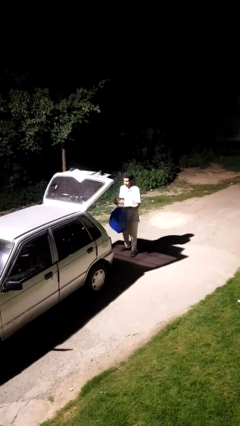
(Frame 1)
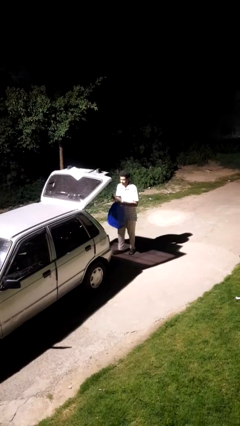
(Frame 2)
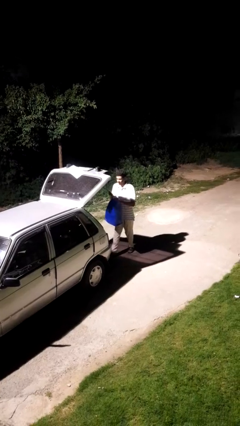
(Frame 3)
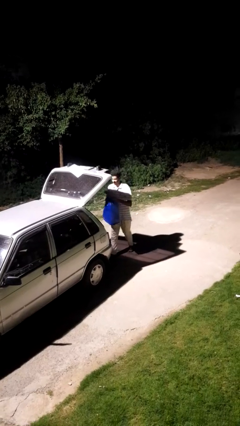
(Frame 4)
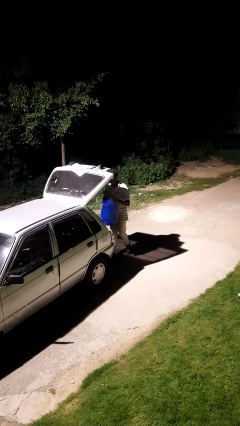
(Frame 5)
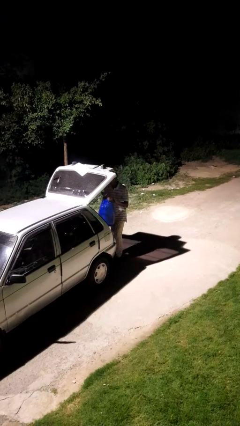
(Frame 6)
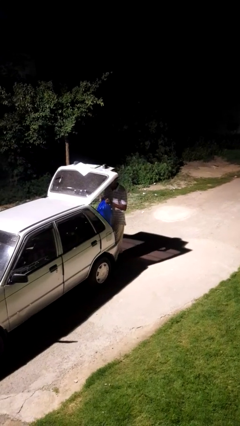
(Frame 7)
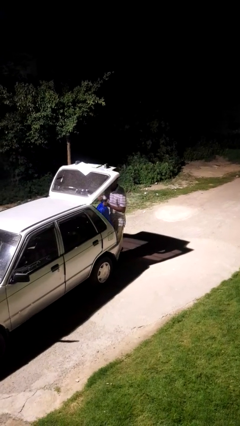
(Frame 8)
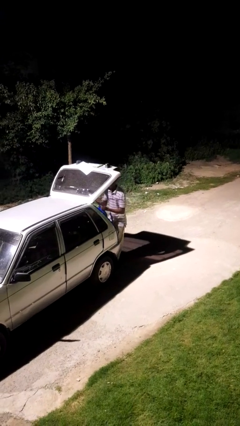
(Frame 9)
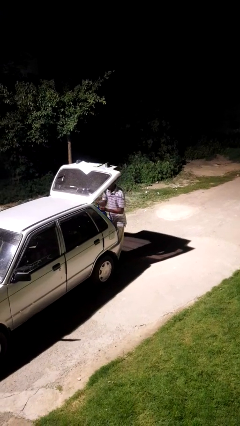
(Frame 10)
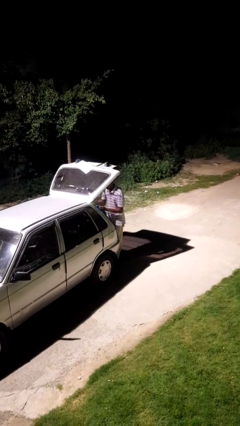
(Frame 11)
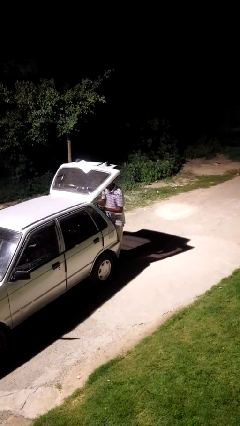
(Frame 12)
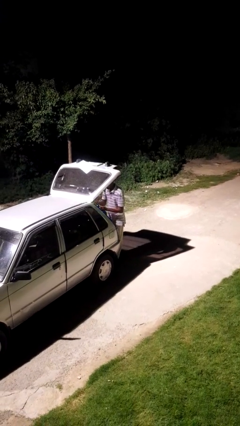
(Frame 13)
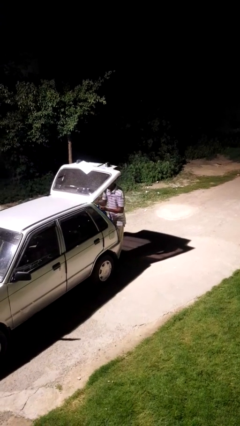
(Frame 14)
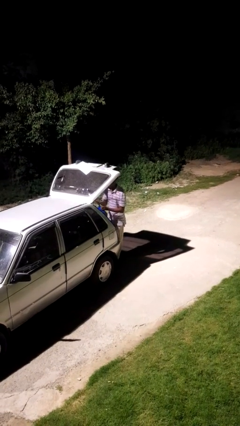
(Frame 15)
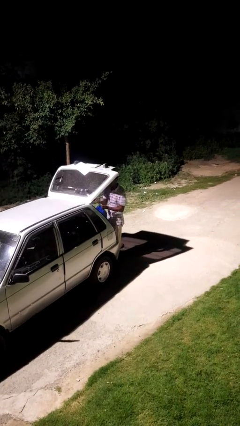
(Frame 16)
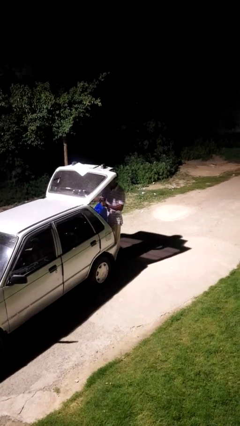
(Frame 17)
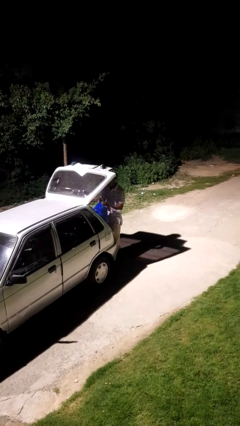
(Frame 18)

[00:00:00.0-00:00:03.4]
person loads car

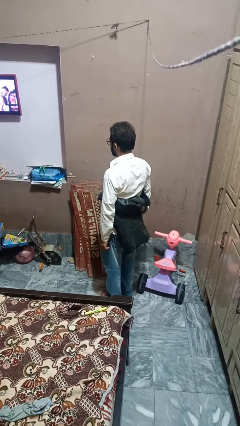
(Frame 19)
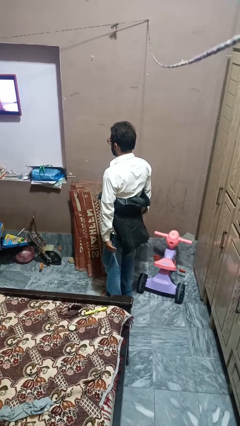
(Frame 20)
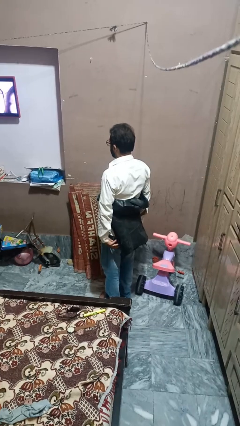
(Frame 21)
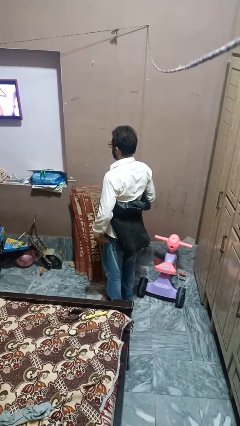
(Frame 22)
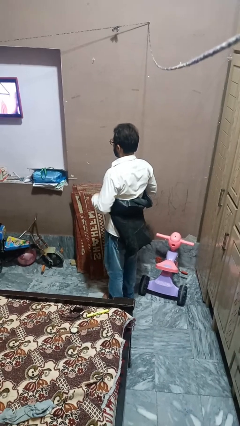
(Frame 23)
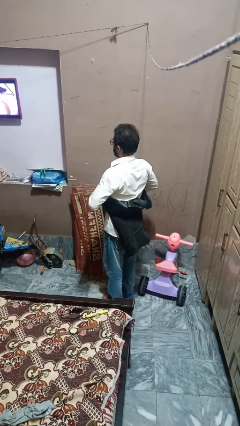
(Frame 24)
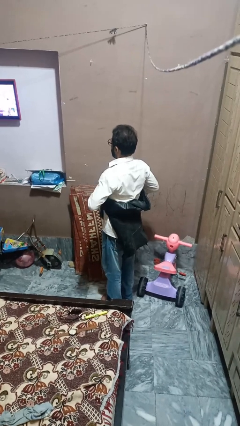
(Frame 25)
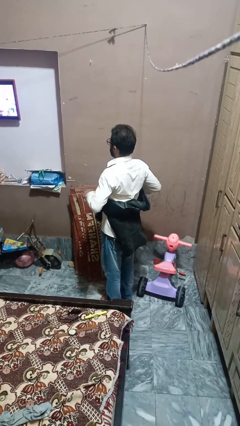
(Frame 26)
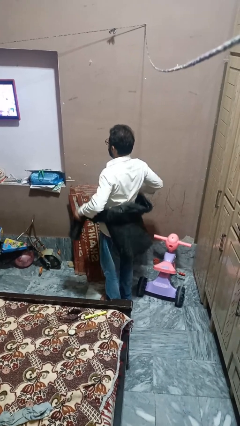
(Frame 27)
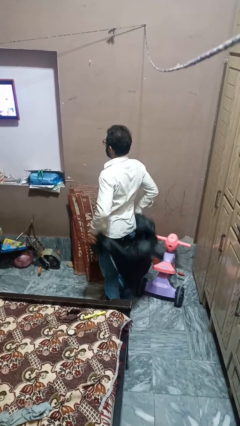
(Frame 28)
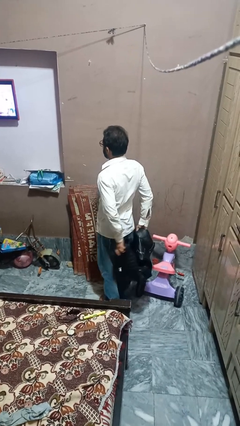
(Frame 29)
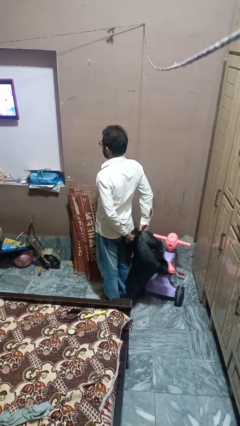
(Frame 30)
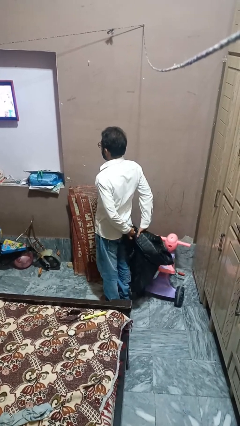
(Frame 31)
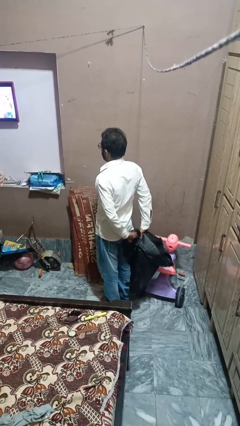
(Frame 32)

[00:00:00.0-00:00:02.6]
person unties jacket around waist

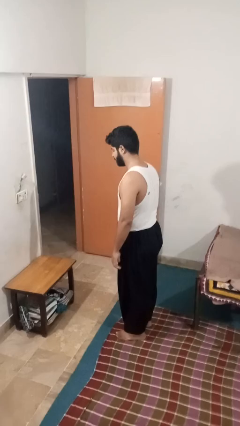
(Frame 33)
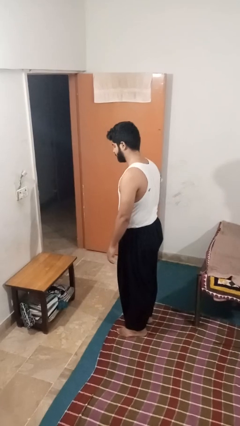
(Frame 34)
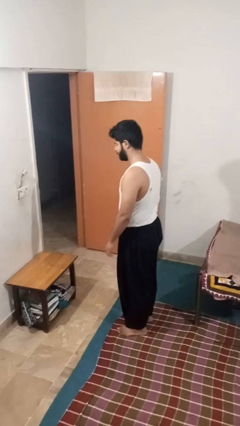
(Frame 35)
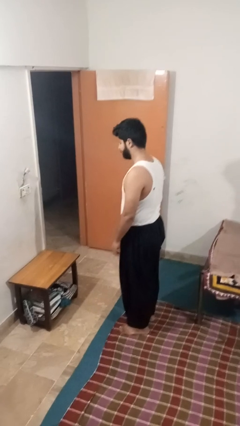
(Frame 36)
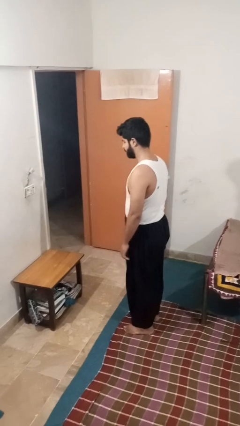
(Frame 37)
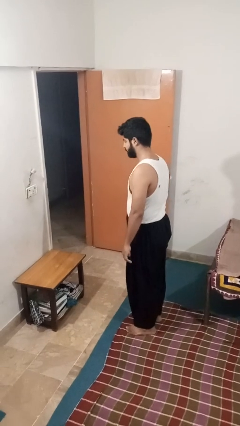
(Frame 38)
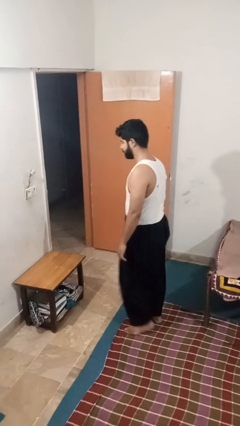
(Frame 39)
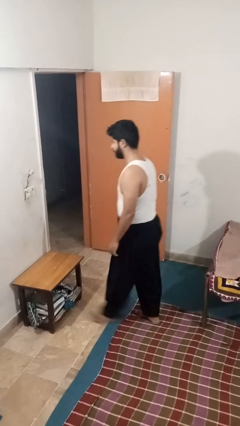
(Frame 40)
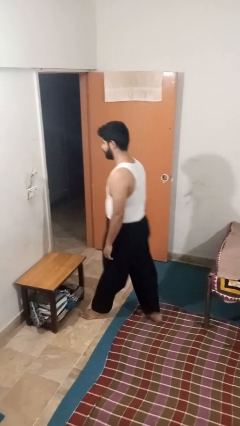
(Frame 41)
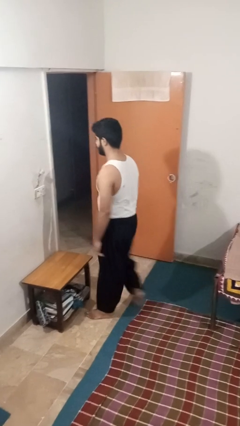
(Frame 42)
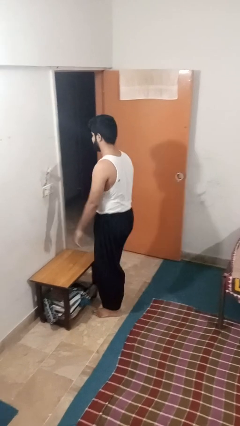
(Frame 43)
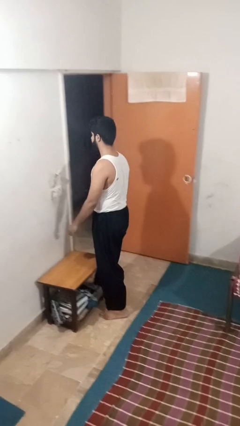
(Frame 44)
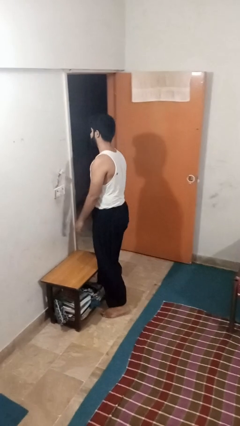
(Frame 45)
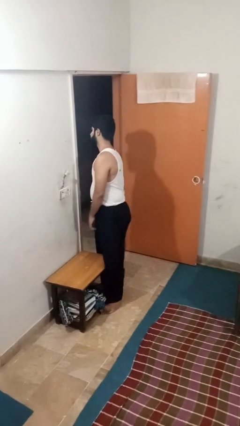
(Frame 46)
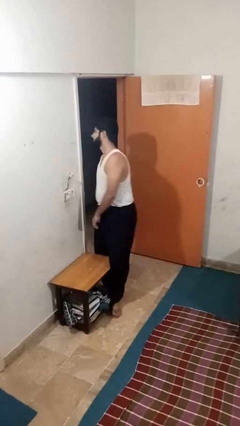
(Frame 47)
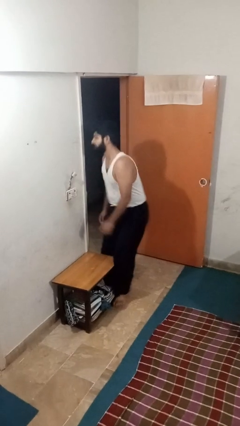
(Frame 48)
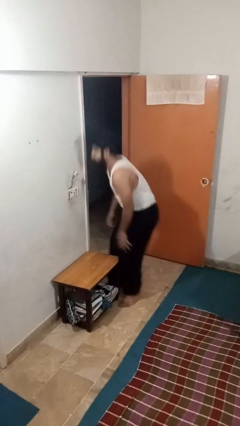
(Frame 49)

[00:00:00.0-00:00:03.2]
person bumps into table

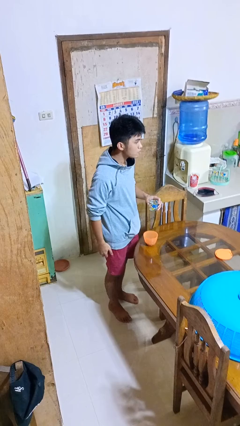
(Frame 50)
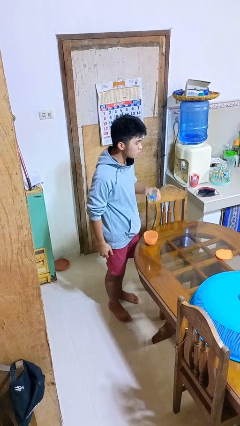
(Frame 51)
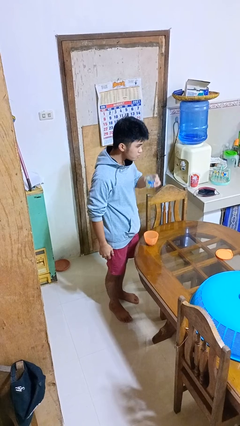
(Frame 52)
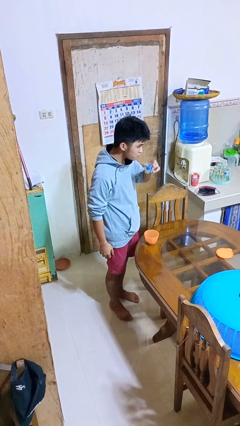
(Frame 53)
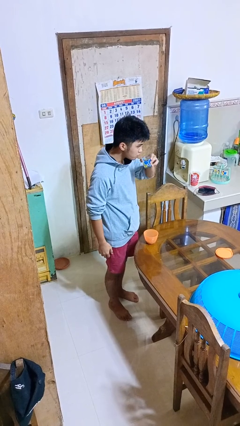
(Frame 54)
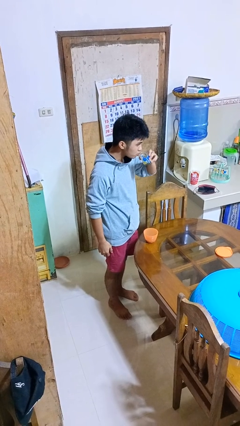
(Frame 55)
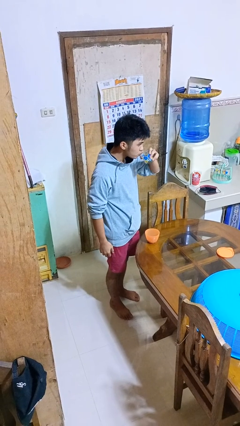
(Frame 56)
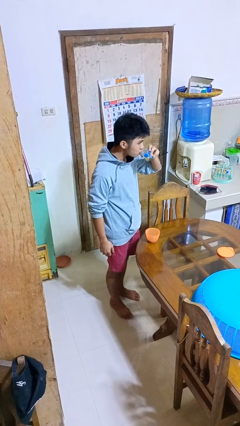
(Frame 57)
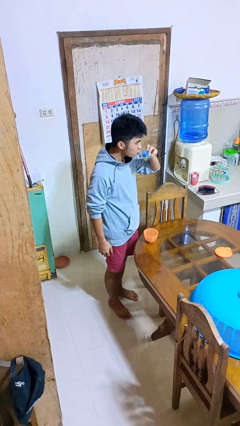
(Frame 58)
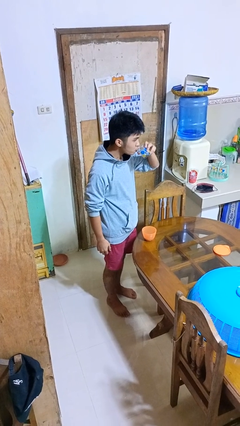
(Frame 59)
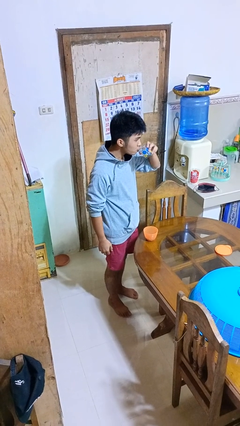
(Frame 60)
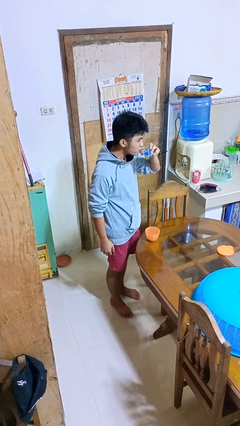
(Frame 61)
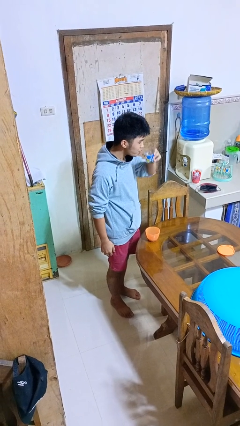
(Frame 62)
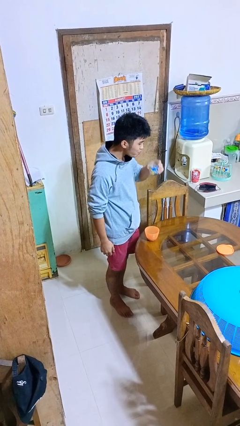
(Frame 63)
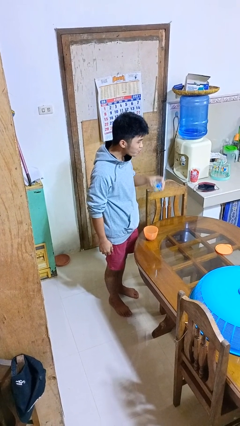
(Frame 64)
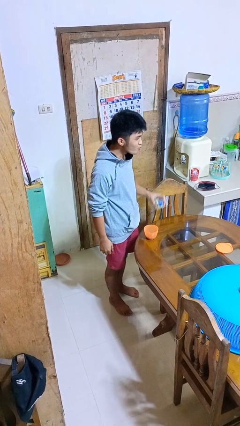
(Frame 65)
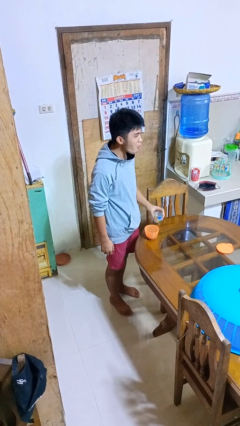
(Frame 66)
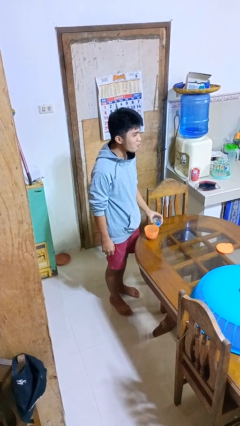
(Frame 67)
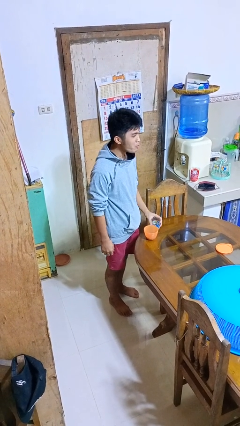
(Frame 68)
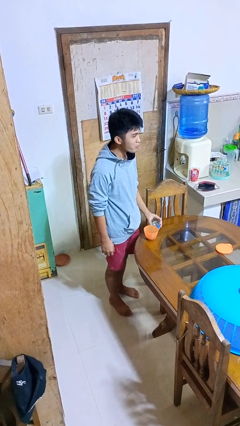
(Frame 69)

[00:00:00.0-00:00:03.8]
person drinks from cup

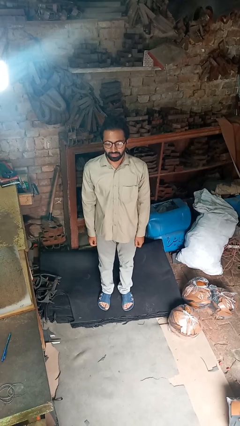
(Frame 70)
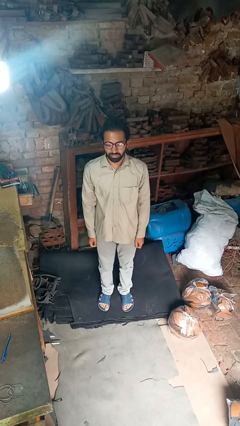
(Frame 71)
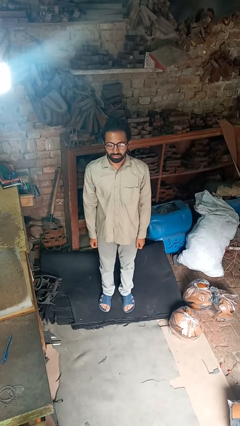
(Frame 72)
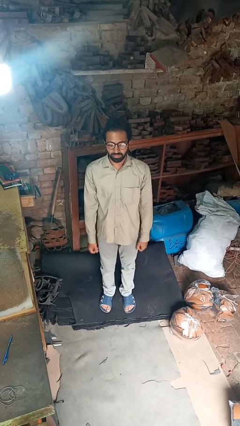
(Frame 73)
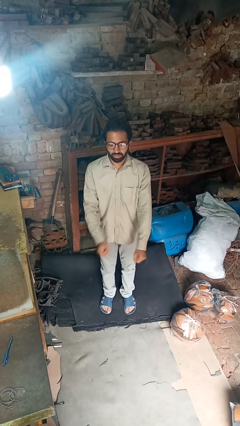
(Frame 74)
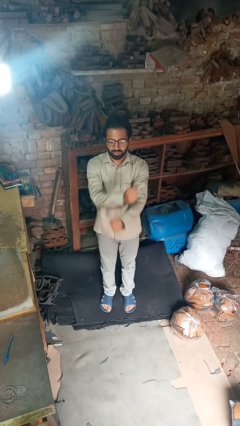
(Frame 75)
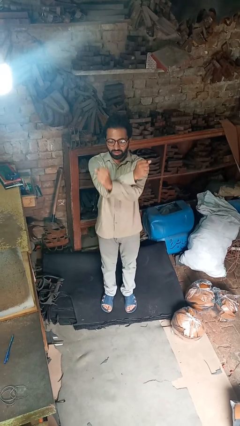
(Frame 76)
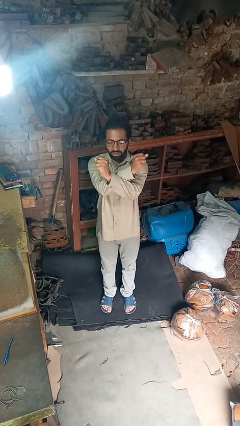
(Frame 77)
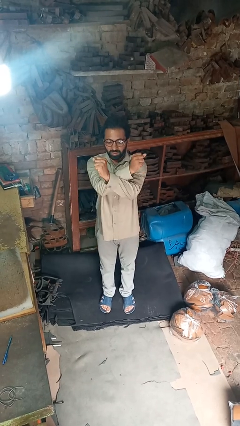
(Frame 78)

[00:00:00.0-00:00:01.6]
person crosses arms

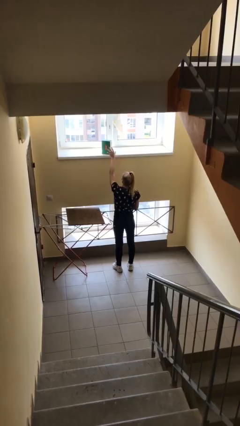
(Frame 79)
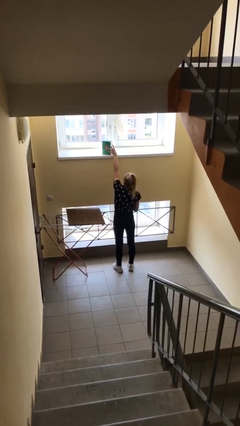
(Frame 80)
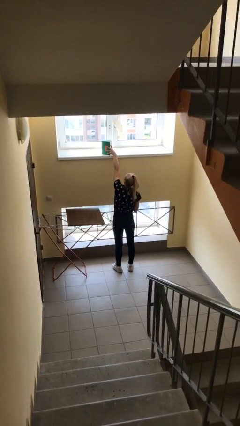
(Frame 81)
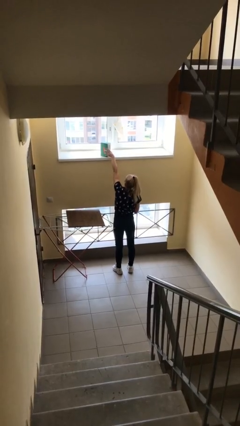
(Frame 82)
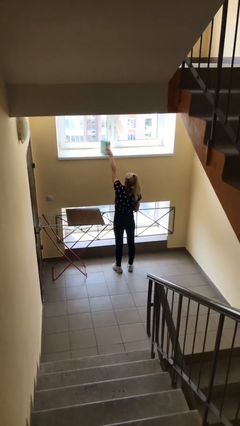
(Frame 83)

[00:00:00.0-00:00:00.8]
person picks up object from shelf

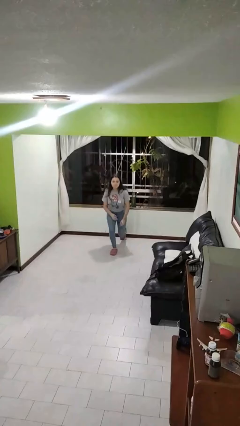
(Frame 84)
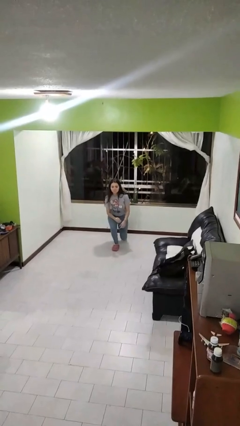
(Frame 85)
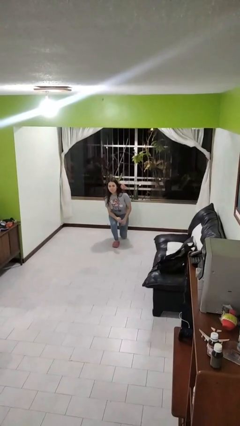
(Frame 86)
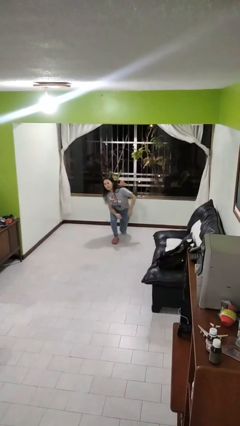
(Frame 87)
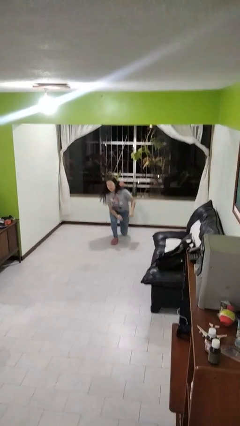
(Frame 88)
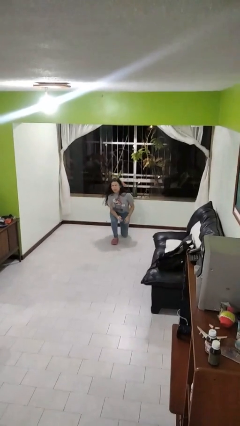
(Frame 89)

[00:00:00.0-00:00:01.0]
person kneels

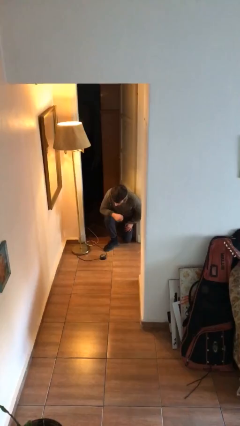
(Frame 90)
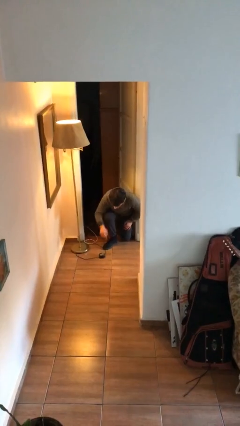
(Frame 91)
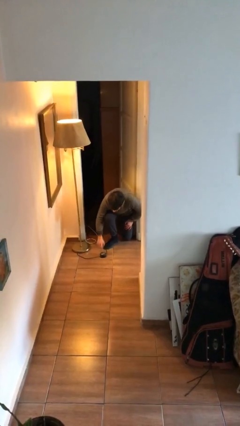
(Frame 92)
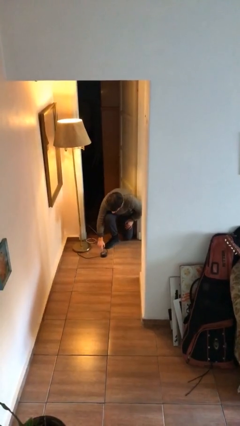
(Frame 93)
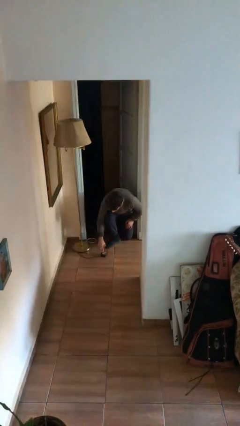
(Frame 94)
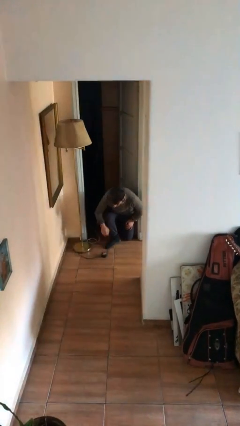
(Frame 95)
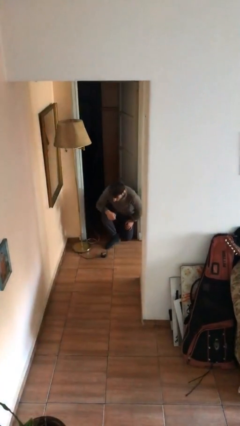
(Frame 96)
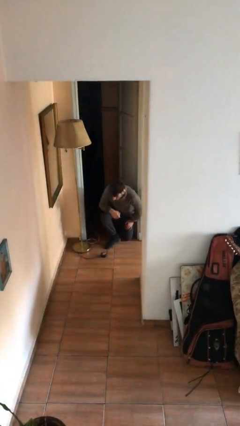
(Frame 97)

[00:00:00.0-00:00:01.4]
person turns off lamp
